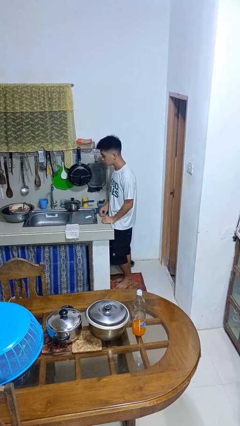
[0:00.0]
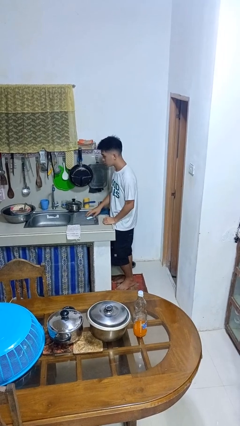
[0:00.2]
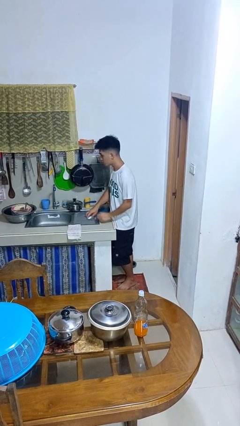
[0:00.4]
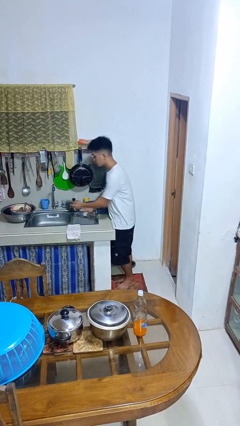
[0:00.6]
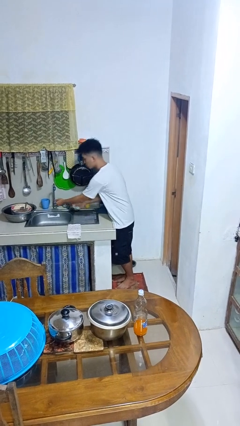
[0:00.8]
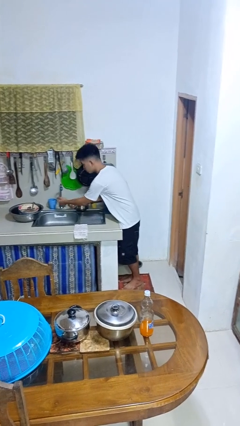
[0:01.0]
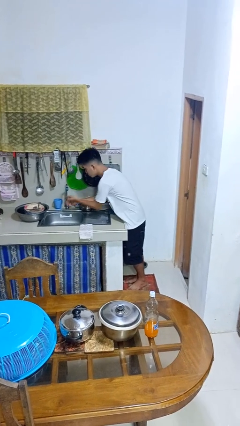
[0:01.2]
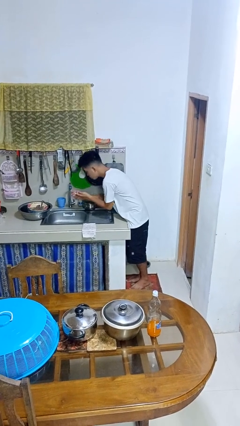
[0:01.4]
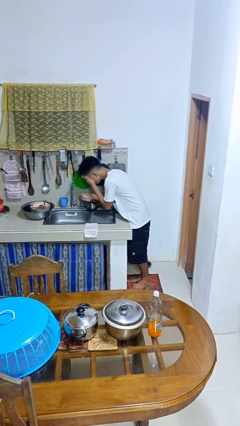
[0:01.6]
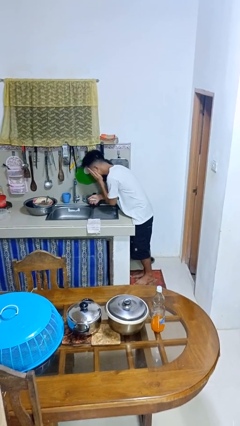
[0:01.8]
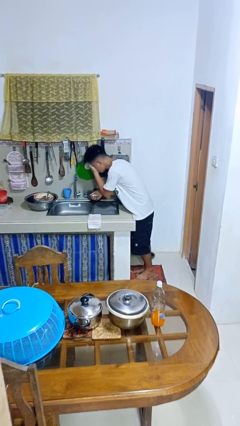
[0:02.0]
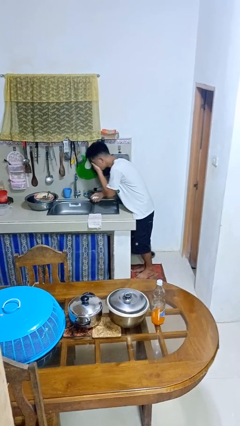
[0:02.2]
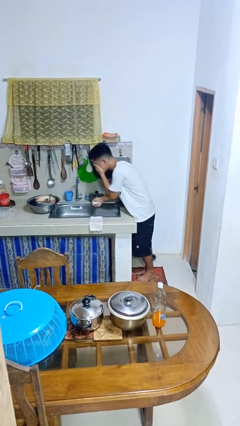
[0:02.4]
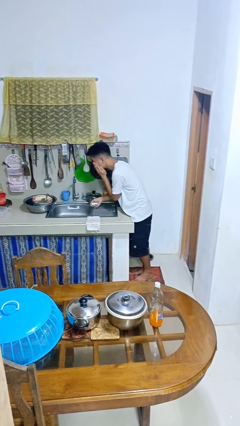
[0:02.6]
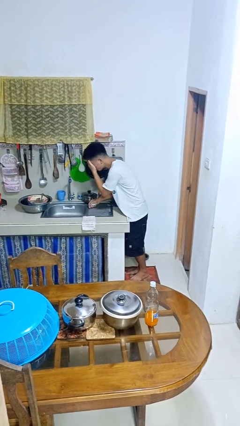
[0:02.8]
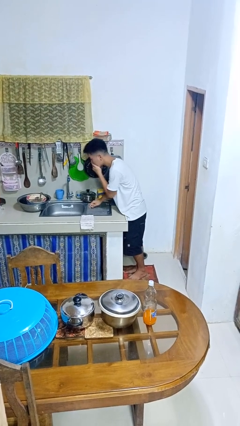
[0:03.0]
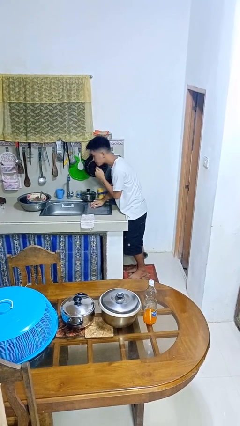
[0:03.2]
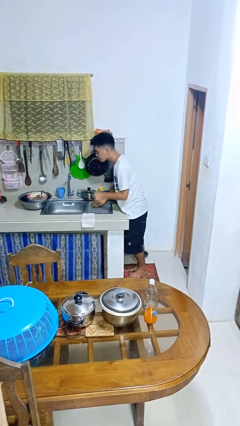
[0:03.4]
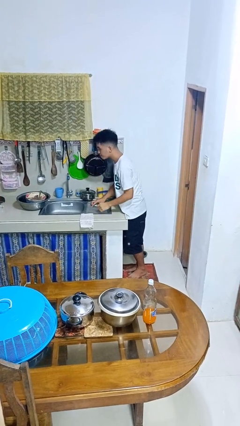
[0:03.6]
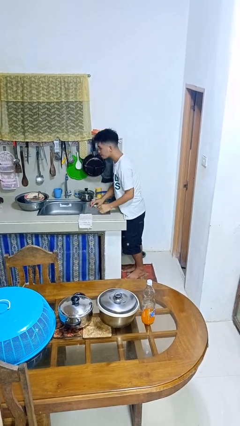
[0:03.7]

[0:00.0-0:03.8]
person washes face

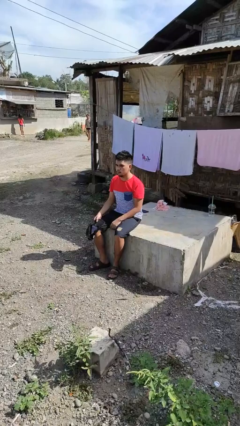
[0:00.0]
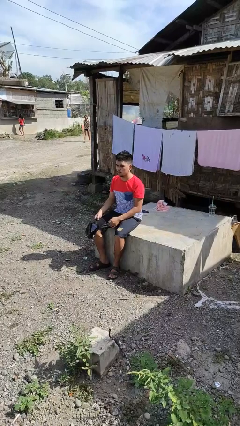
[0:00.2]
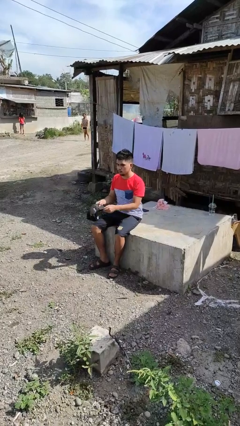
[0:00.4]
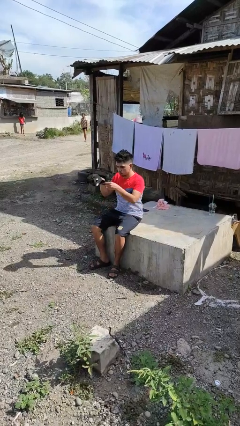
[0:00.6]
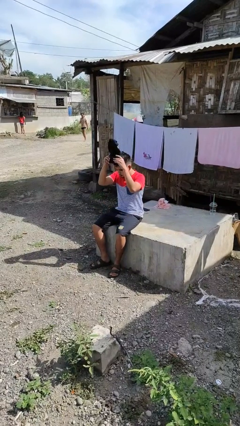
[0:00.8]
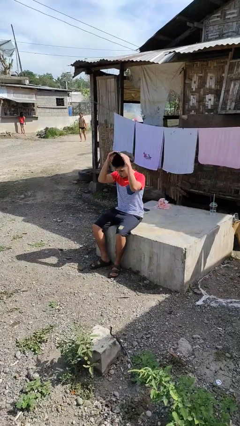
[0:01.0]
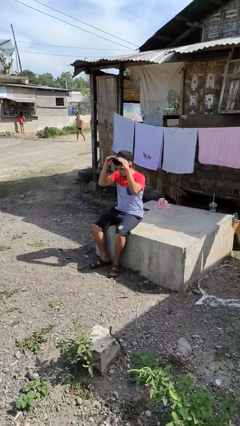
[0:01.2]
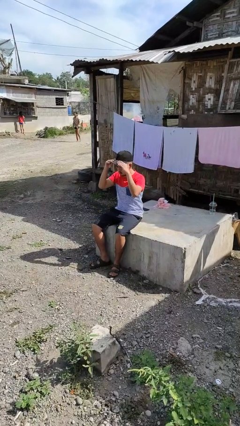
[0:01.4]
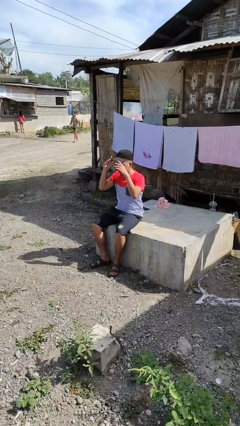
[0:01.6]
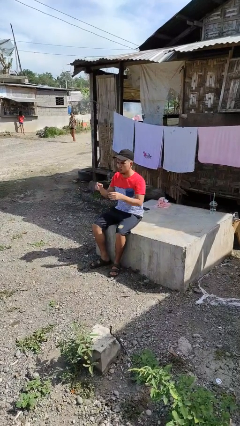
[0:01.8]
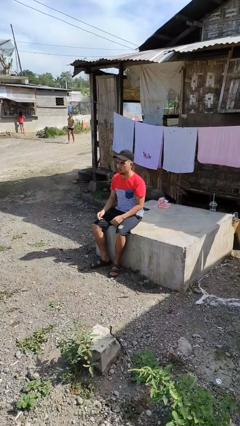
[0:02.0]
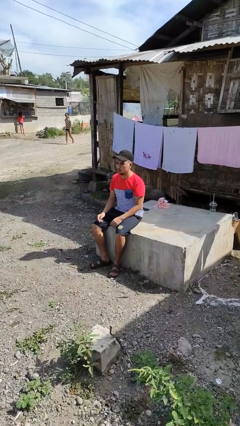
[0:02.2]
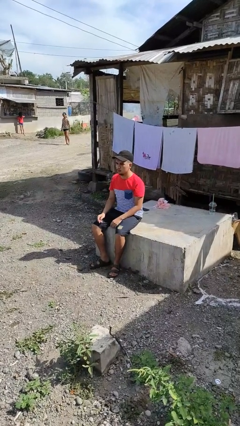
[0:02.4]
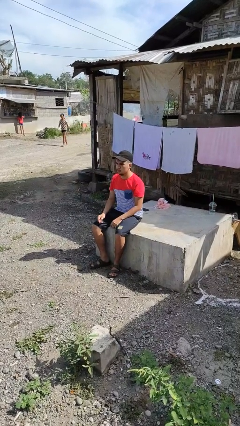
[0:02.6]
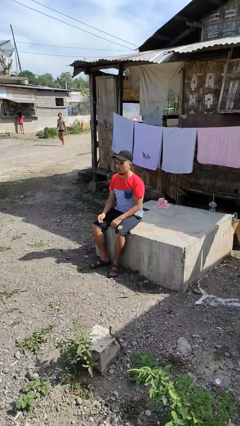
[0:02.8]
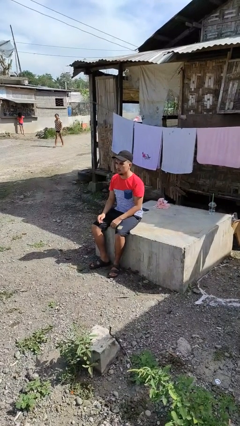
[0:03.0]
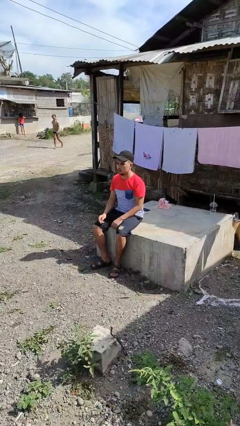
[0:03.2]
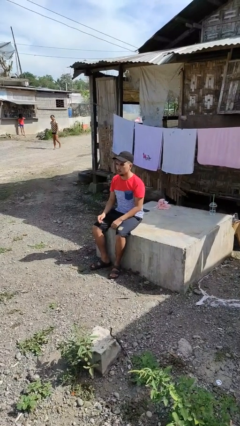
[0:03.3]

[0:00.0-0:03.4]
person puts on hat

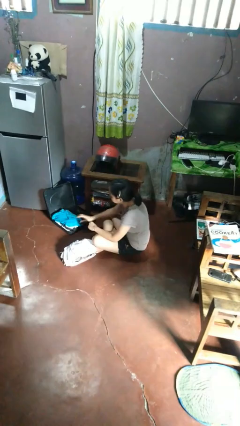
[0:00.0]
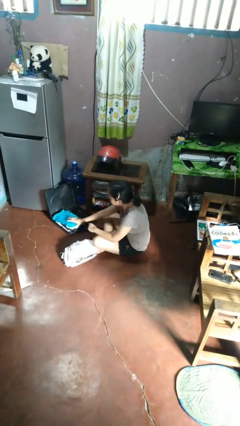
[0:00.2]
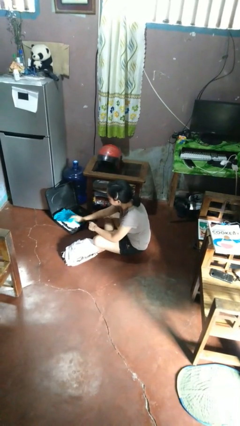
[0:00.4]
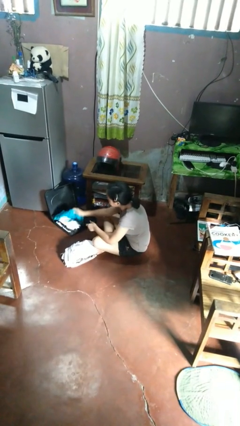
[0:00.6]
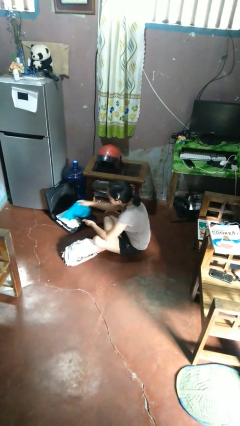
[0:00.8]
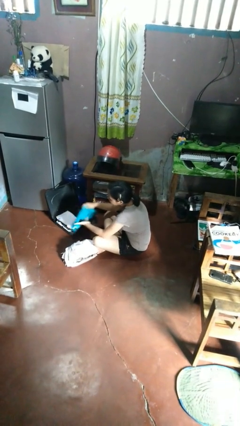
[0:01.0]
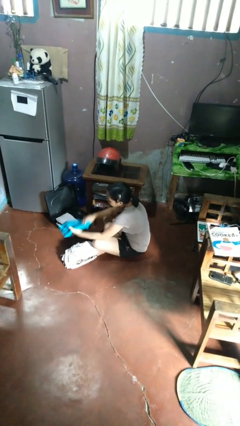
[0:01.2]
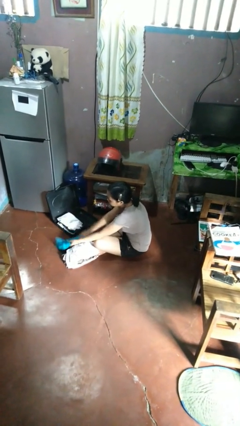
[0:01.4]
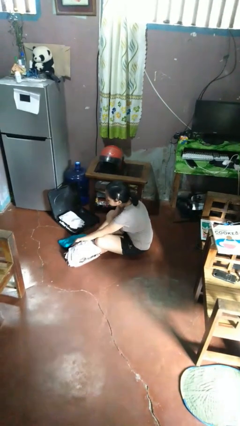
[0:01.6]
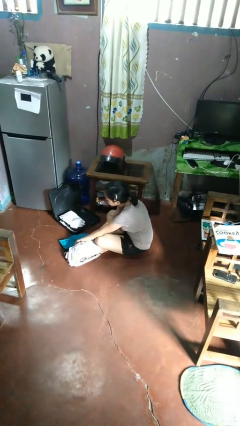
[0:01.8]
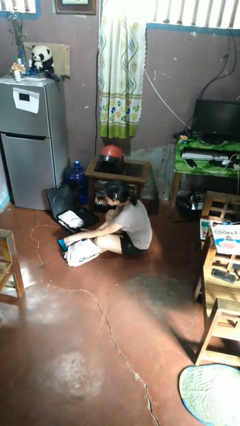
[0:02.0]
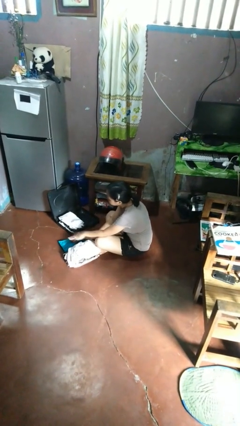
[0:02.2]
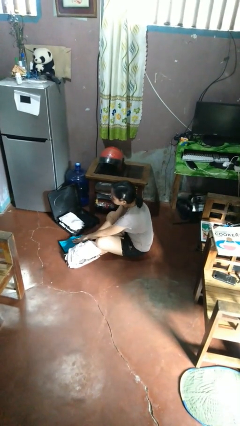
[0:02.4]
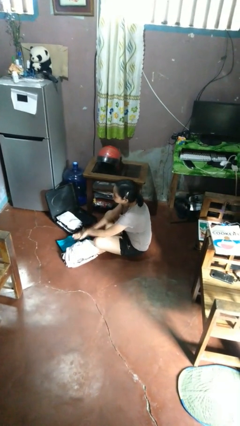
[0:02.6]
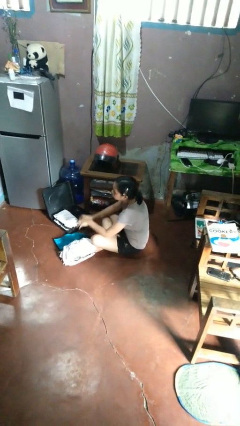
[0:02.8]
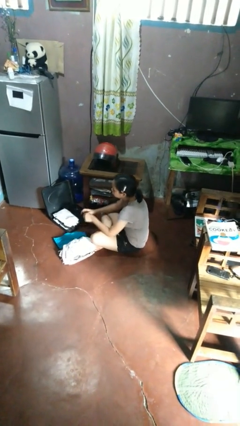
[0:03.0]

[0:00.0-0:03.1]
person unloads clothes from suitcase

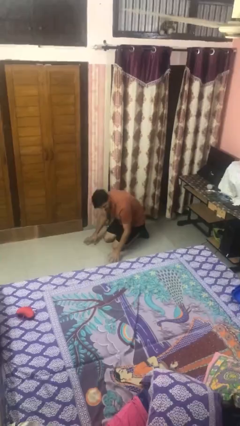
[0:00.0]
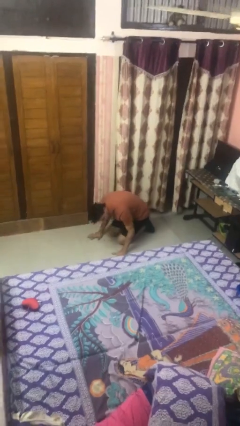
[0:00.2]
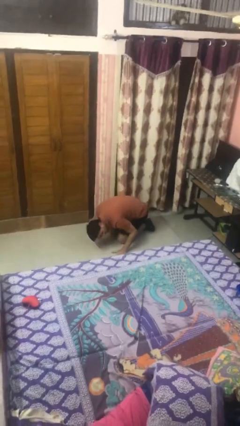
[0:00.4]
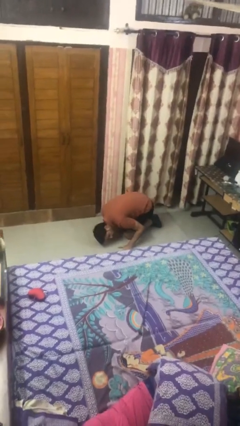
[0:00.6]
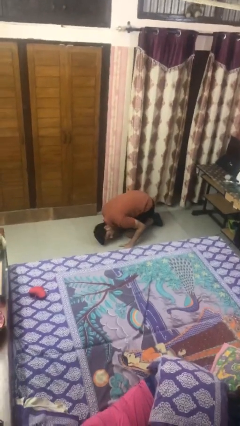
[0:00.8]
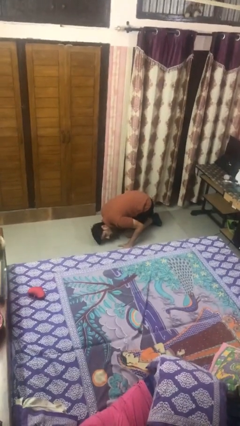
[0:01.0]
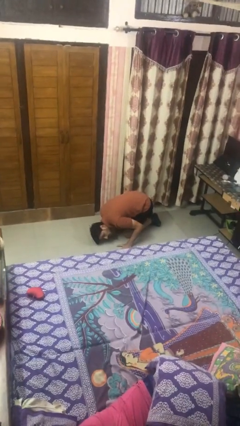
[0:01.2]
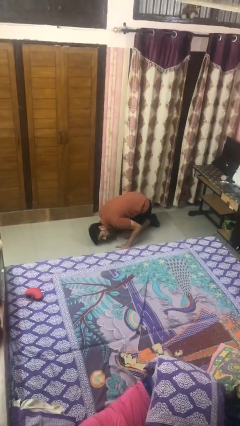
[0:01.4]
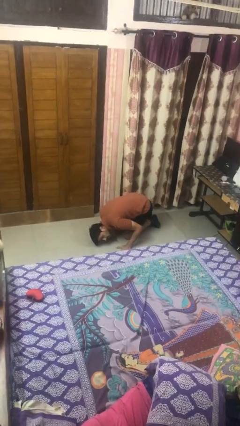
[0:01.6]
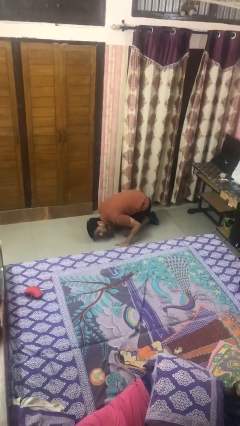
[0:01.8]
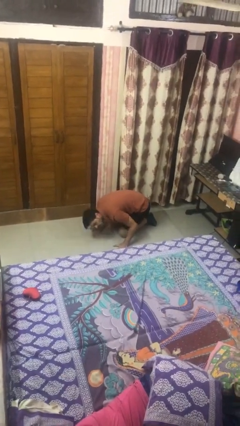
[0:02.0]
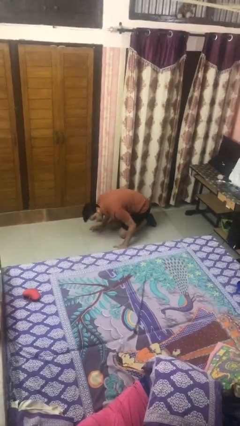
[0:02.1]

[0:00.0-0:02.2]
person searches under bed

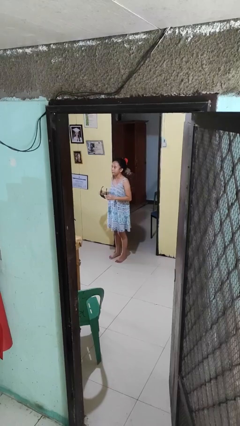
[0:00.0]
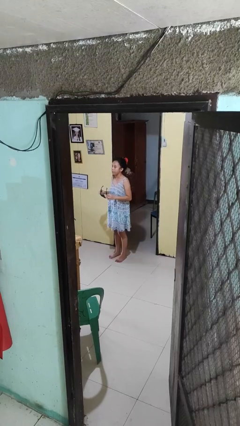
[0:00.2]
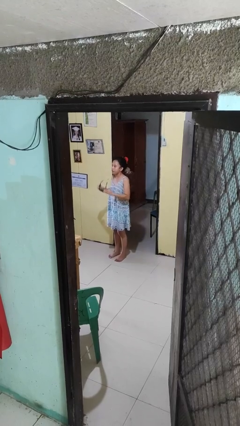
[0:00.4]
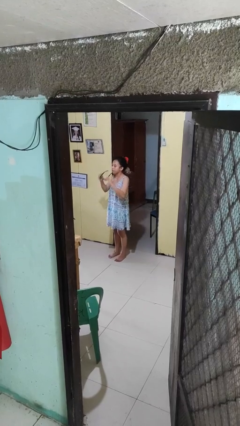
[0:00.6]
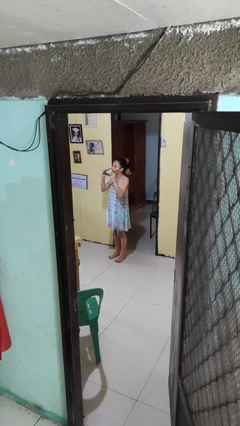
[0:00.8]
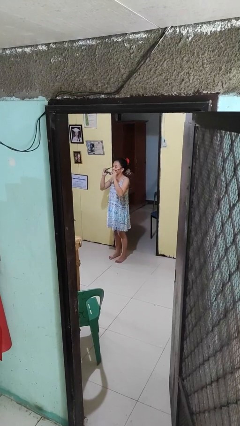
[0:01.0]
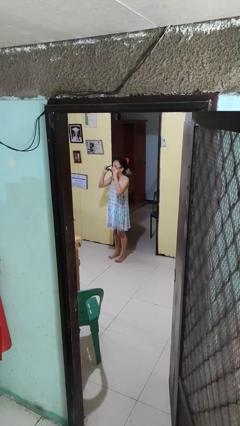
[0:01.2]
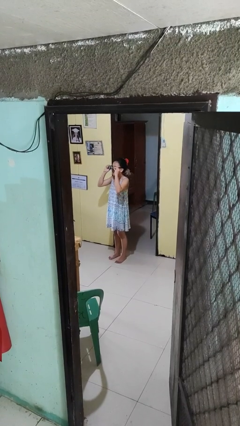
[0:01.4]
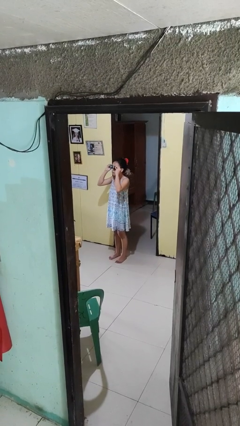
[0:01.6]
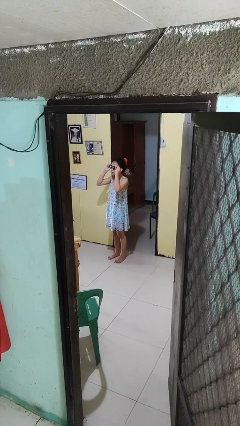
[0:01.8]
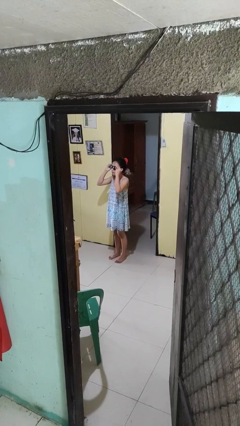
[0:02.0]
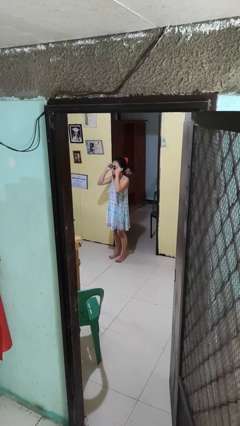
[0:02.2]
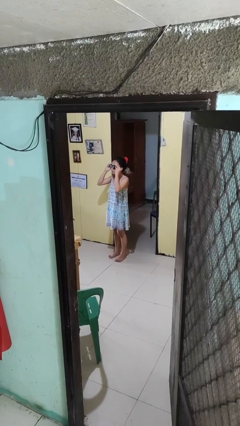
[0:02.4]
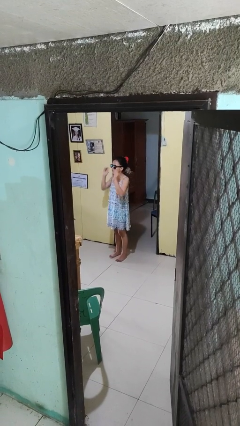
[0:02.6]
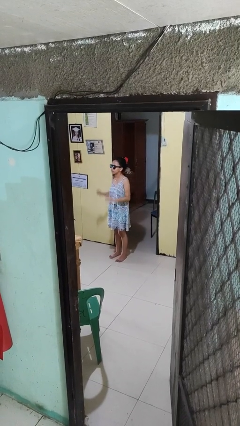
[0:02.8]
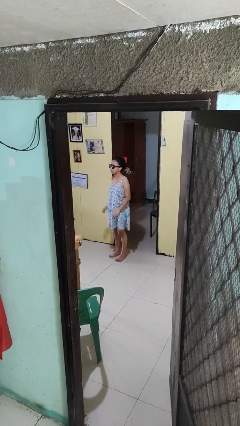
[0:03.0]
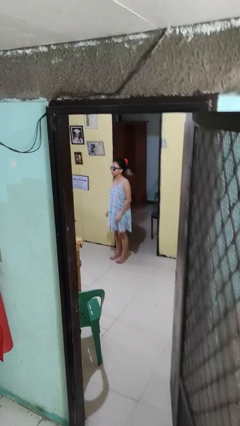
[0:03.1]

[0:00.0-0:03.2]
person puts on sunglasses

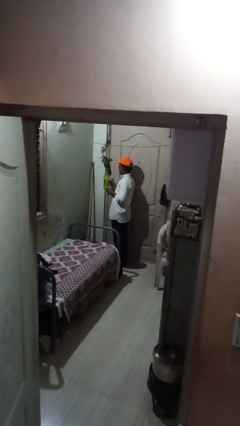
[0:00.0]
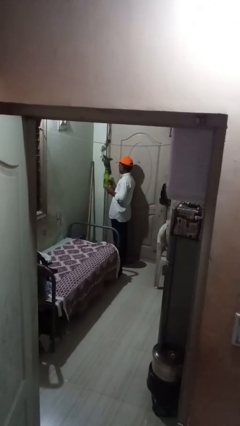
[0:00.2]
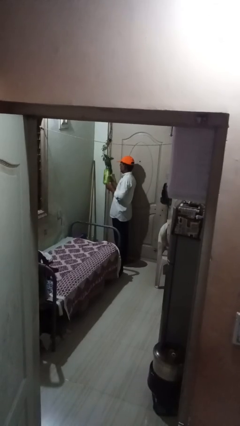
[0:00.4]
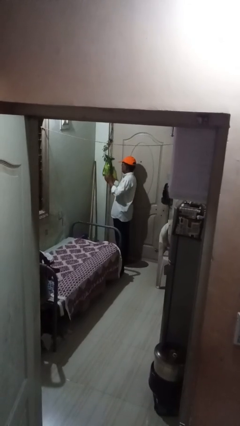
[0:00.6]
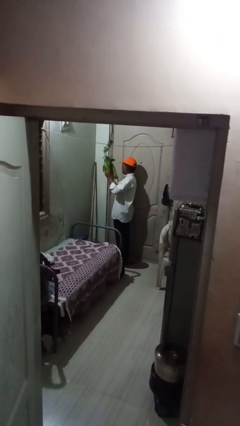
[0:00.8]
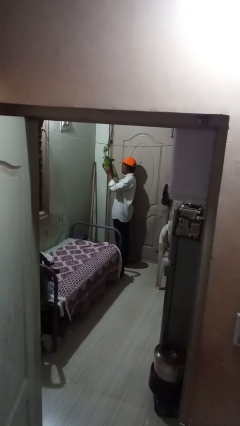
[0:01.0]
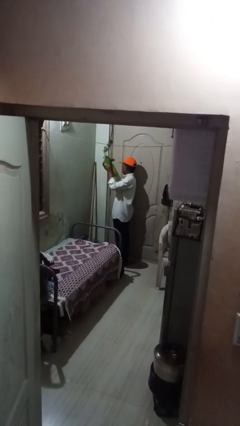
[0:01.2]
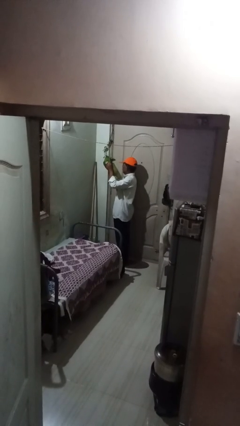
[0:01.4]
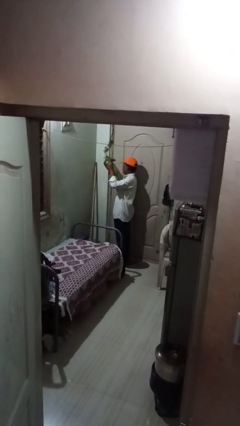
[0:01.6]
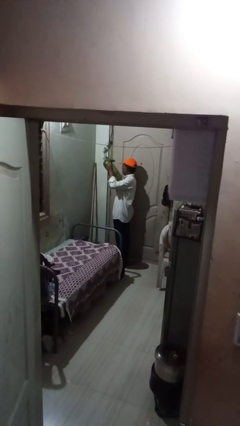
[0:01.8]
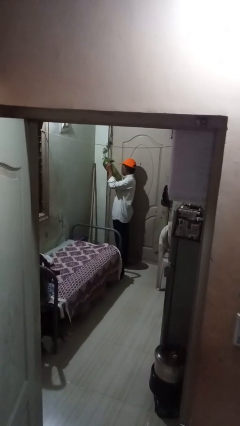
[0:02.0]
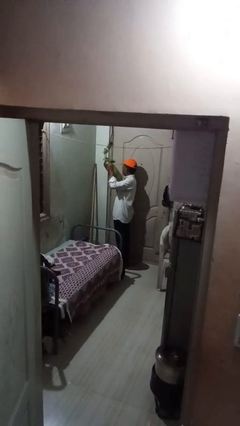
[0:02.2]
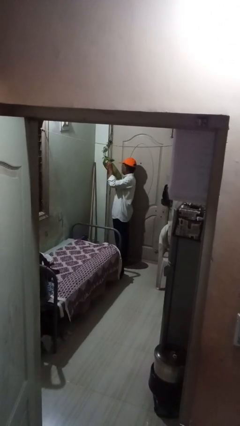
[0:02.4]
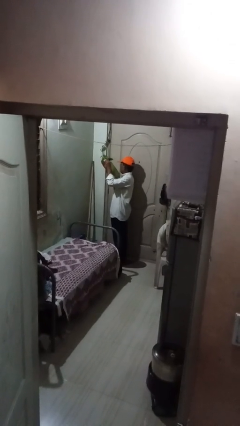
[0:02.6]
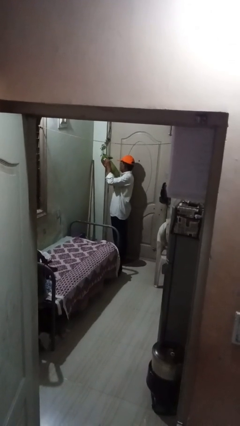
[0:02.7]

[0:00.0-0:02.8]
person waters houseplant
